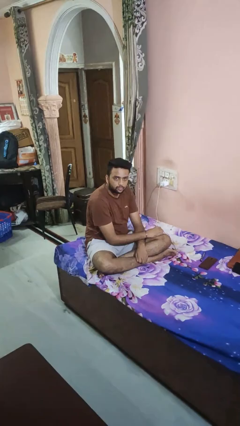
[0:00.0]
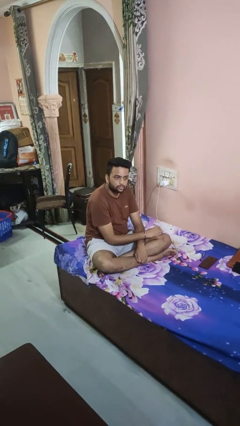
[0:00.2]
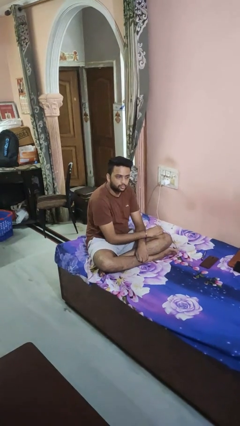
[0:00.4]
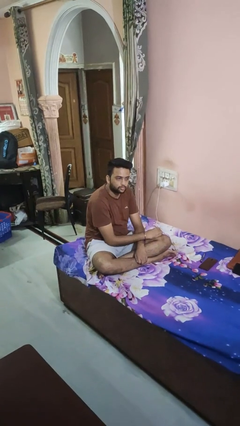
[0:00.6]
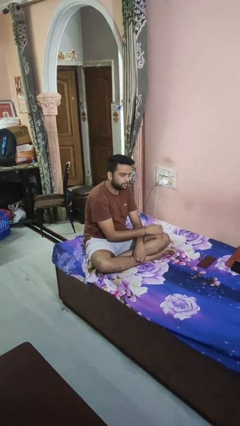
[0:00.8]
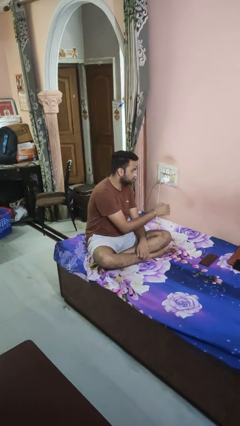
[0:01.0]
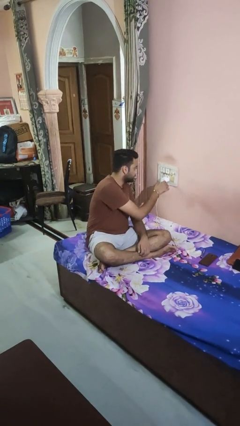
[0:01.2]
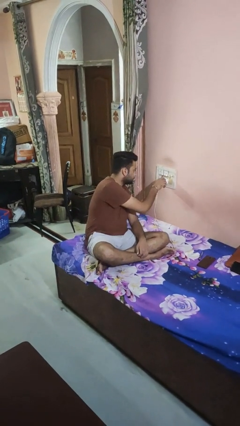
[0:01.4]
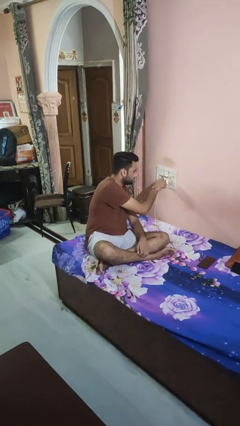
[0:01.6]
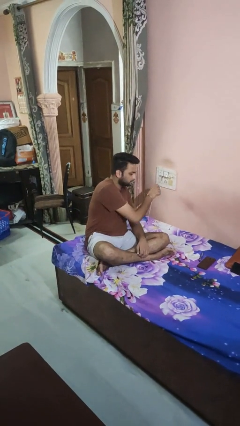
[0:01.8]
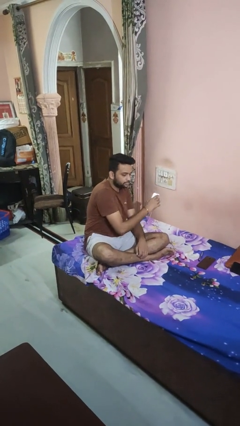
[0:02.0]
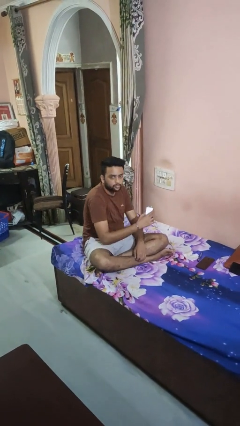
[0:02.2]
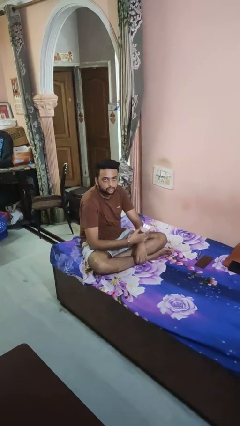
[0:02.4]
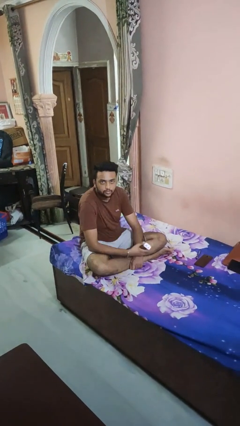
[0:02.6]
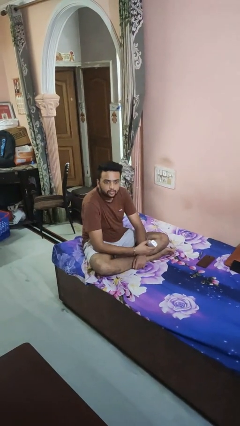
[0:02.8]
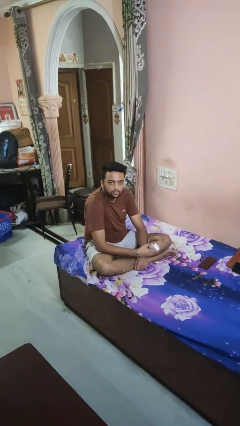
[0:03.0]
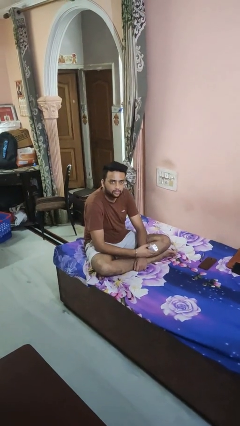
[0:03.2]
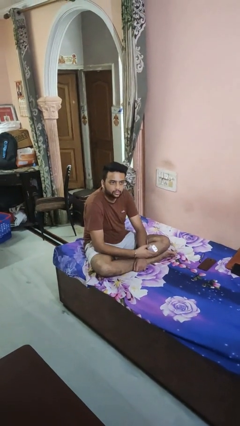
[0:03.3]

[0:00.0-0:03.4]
person unplugs from electrical socket

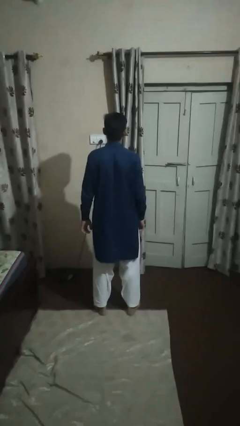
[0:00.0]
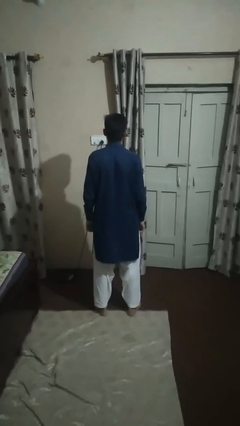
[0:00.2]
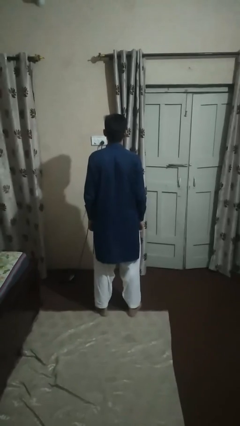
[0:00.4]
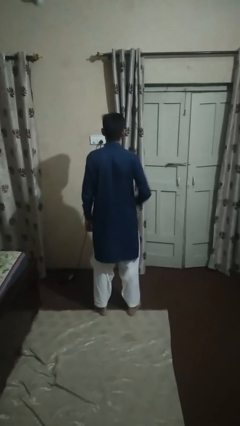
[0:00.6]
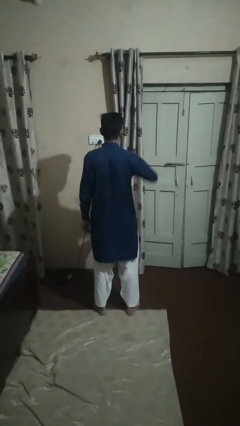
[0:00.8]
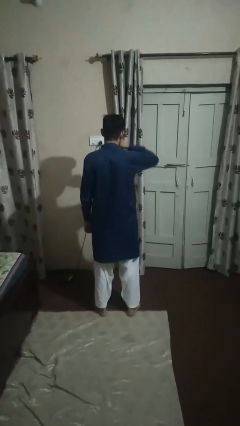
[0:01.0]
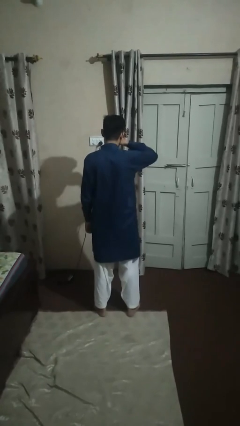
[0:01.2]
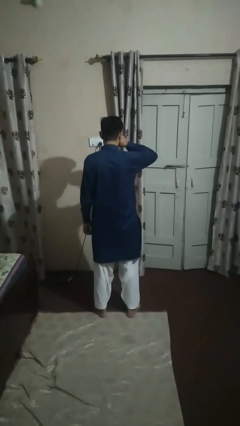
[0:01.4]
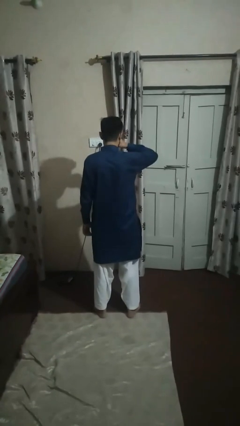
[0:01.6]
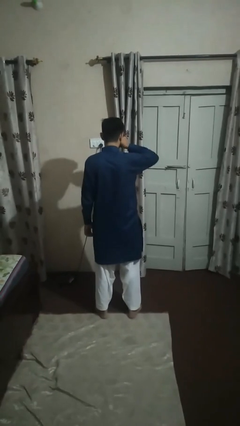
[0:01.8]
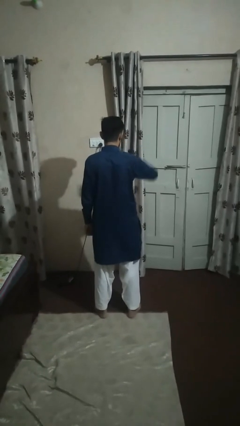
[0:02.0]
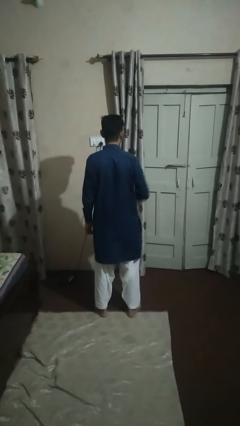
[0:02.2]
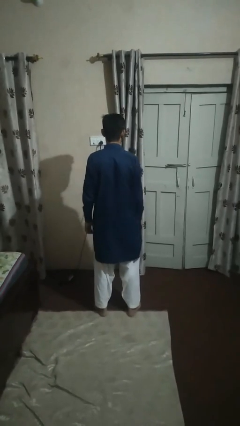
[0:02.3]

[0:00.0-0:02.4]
person rubs eyes

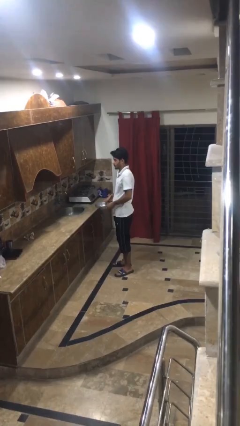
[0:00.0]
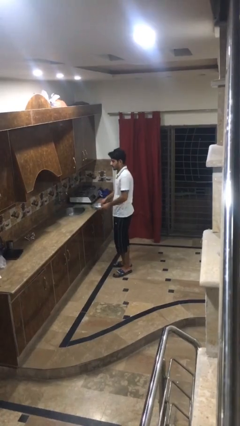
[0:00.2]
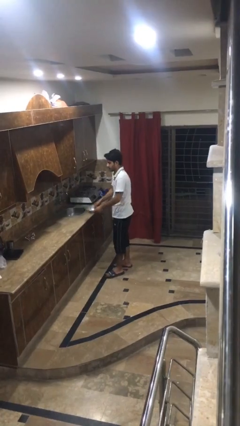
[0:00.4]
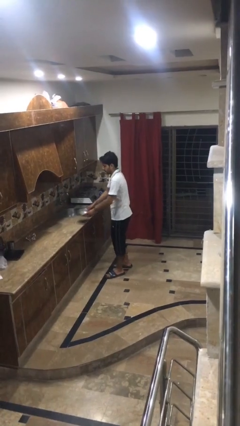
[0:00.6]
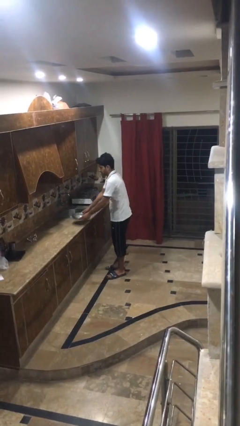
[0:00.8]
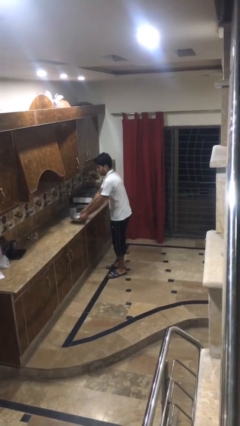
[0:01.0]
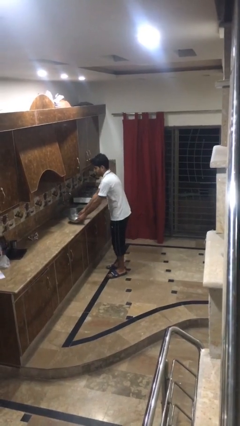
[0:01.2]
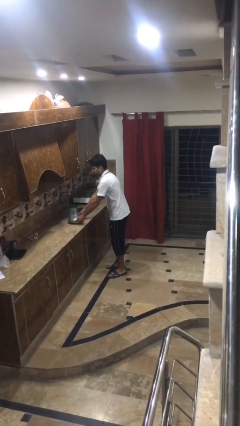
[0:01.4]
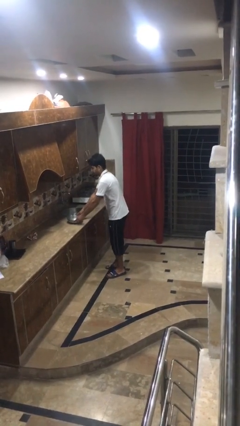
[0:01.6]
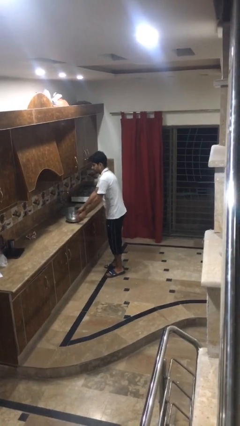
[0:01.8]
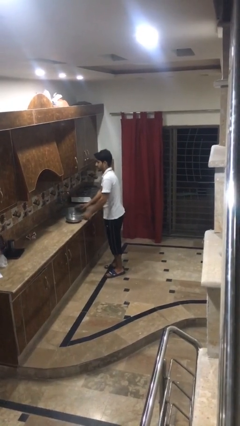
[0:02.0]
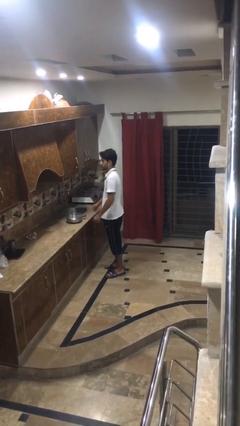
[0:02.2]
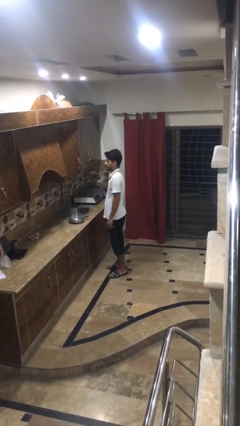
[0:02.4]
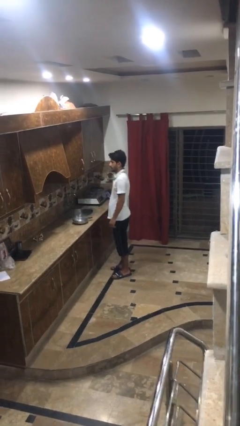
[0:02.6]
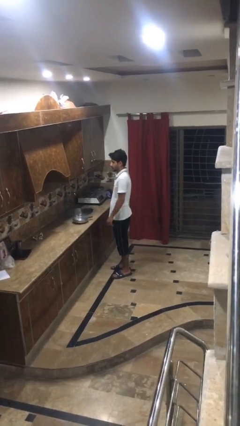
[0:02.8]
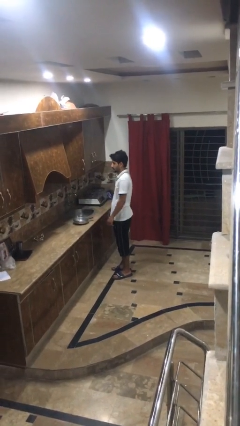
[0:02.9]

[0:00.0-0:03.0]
person puts down object on countertop

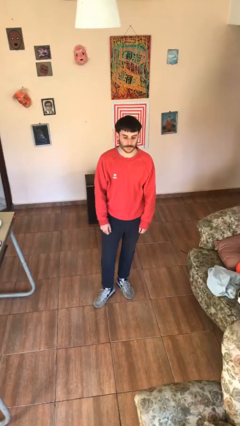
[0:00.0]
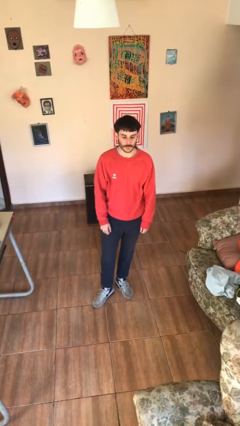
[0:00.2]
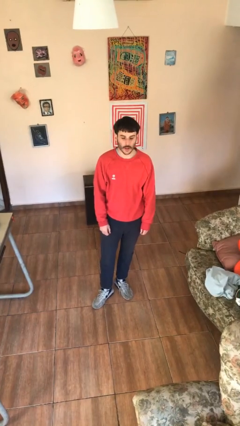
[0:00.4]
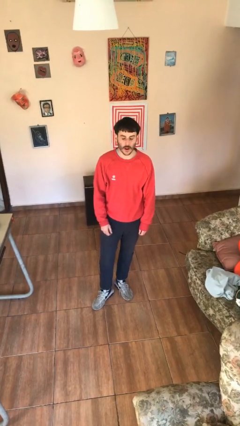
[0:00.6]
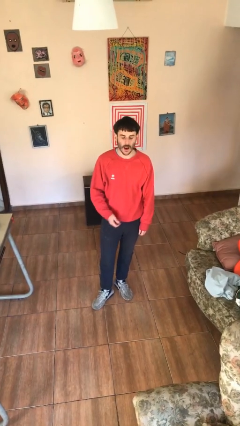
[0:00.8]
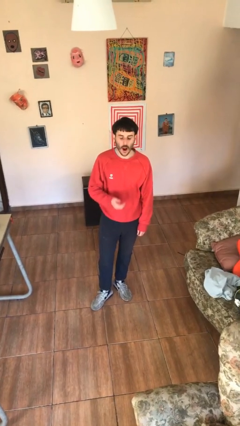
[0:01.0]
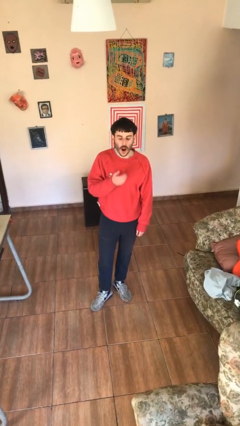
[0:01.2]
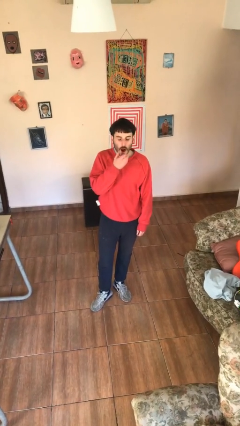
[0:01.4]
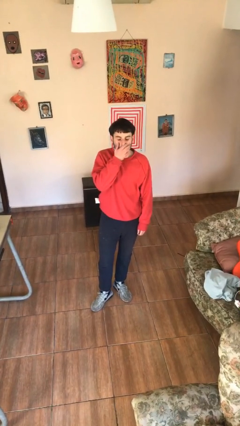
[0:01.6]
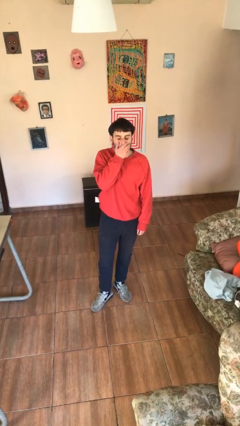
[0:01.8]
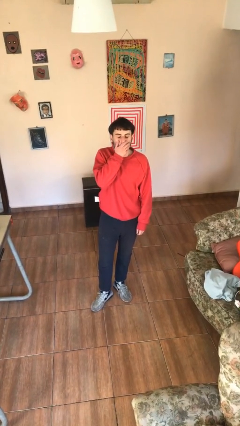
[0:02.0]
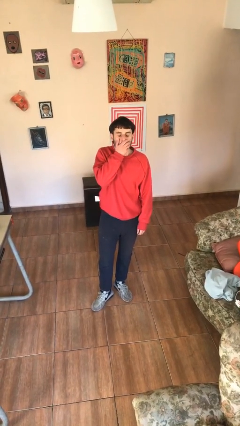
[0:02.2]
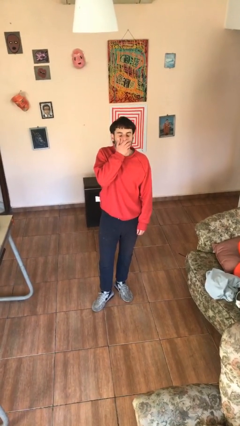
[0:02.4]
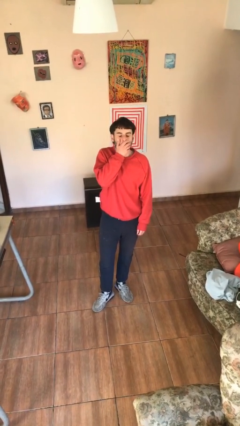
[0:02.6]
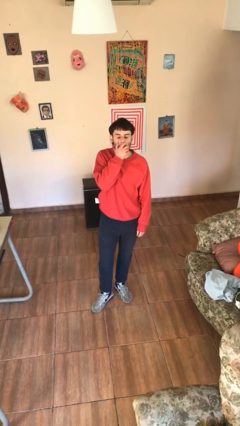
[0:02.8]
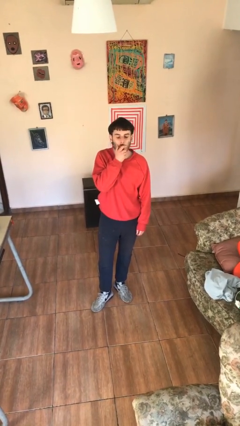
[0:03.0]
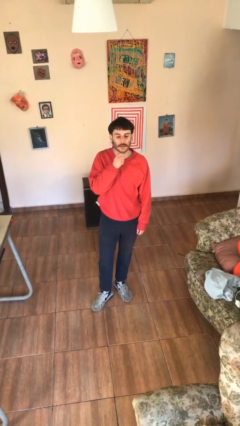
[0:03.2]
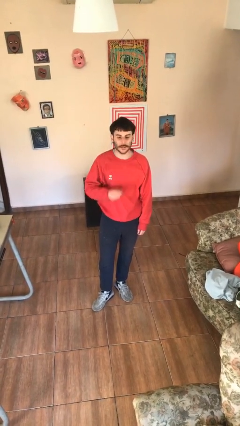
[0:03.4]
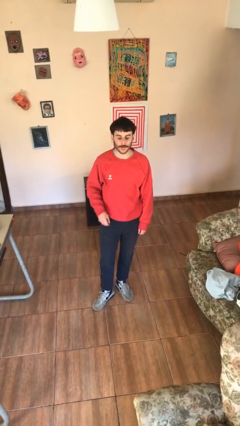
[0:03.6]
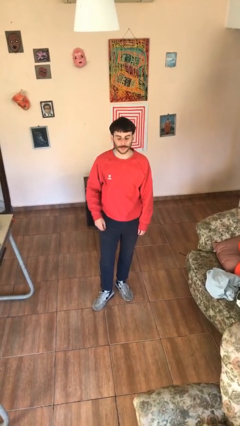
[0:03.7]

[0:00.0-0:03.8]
person yawns

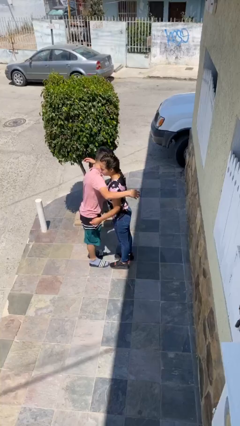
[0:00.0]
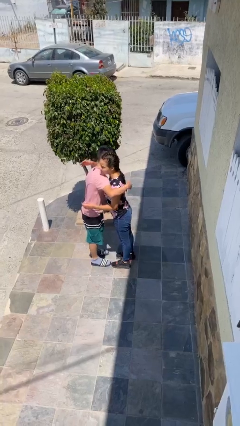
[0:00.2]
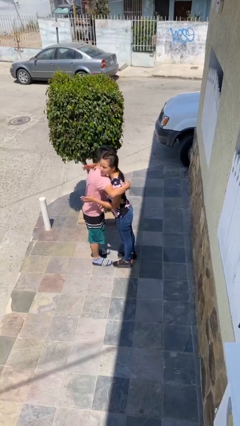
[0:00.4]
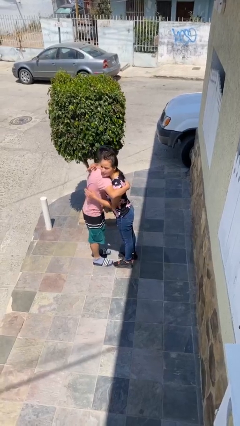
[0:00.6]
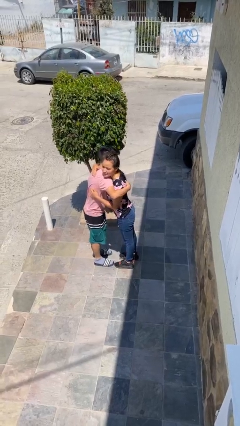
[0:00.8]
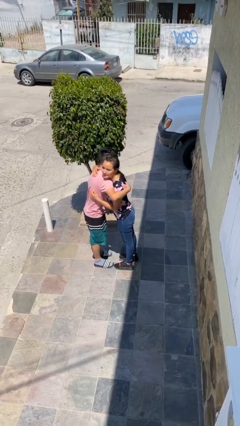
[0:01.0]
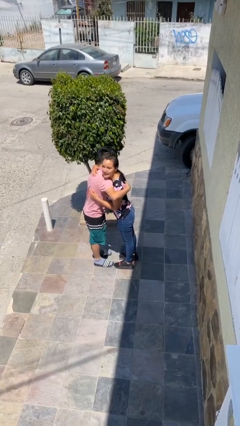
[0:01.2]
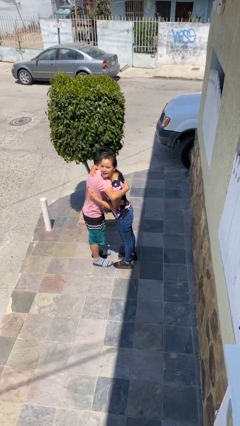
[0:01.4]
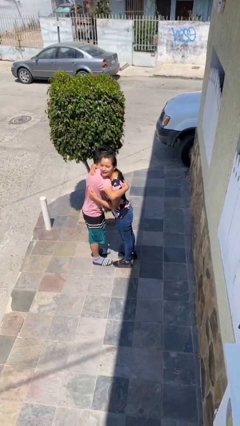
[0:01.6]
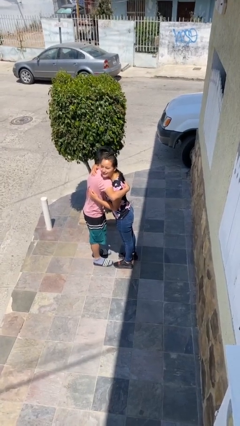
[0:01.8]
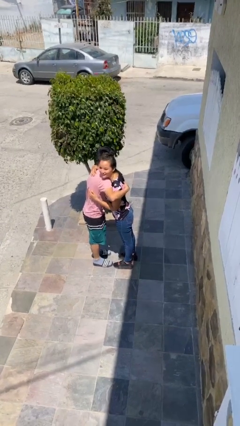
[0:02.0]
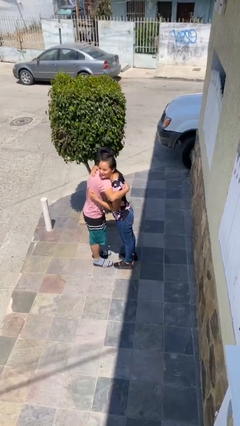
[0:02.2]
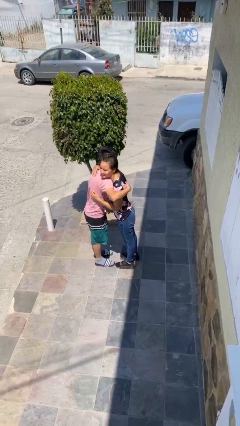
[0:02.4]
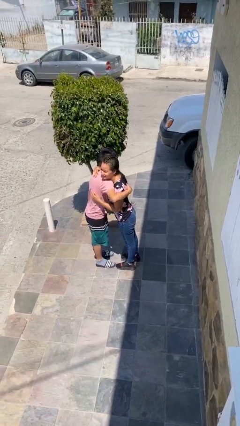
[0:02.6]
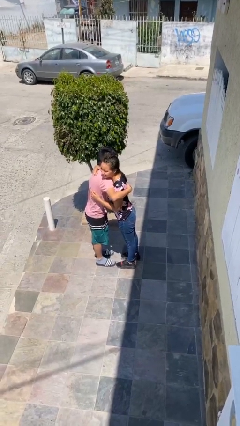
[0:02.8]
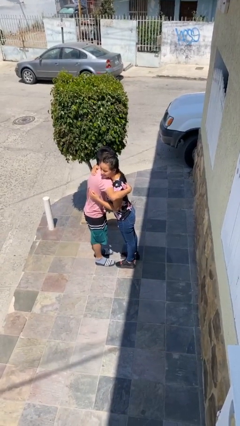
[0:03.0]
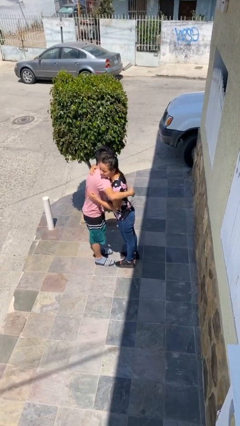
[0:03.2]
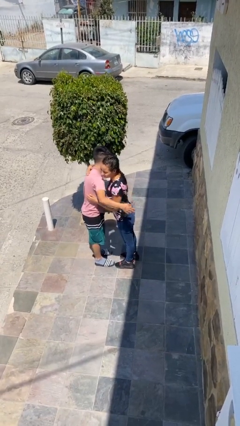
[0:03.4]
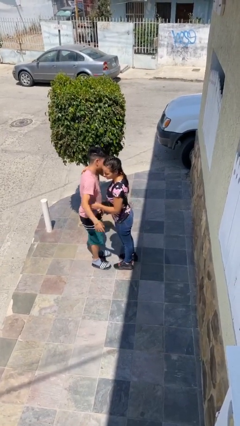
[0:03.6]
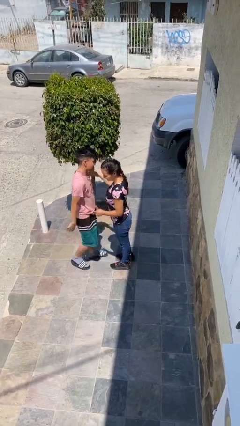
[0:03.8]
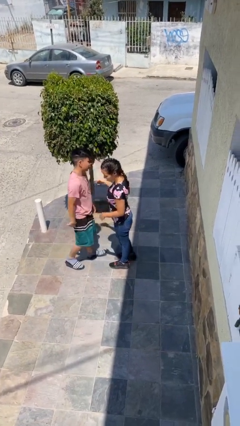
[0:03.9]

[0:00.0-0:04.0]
person embraces person

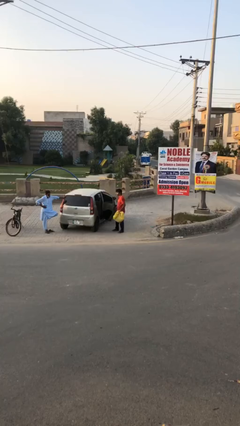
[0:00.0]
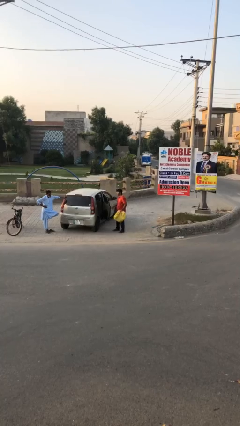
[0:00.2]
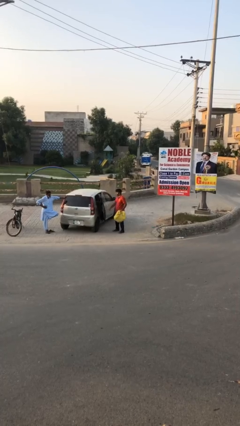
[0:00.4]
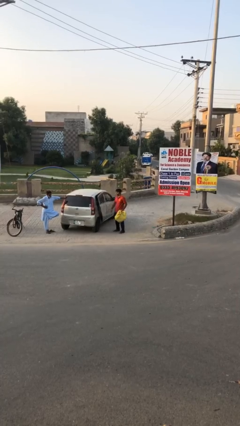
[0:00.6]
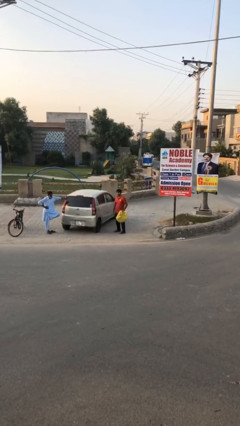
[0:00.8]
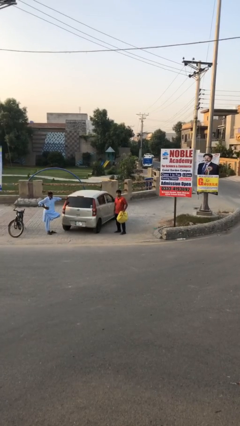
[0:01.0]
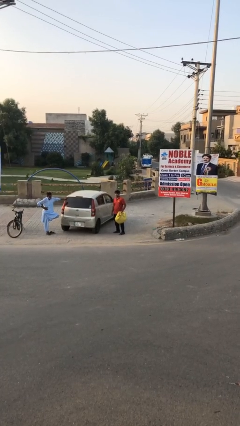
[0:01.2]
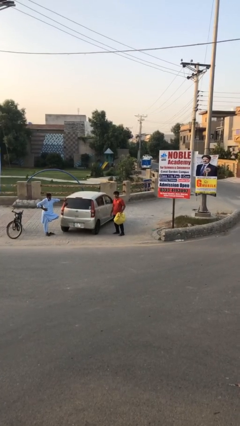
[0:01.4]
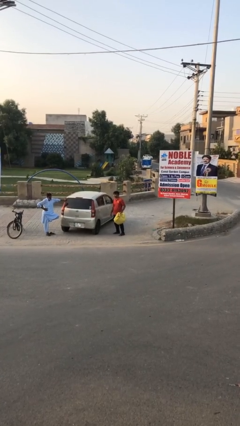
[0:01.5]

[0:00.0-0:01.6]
person closes car door
